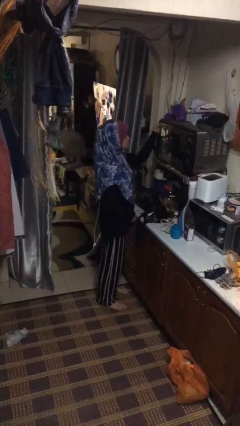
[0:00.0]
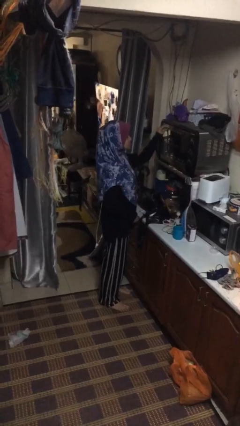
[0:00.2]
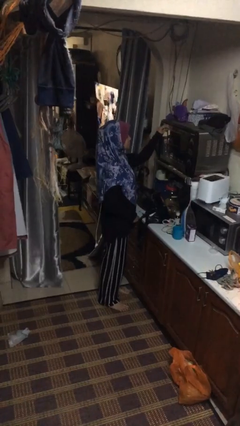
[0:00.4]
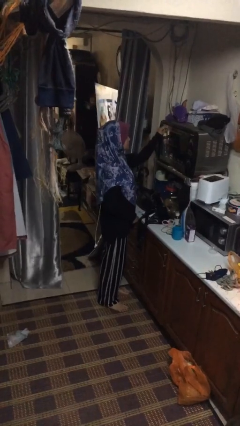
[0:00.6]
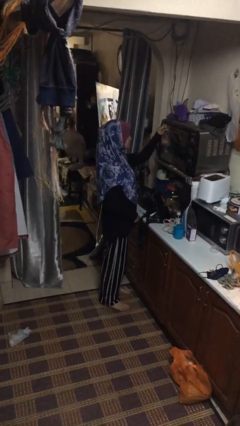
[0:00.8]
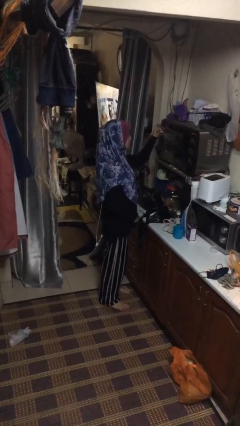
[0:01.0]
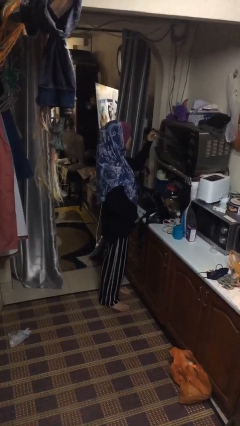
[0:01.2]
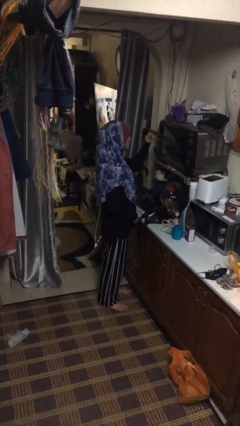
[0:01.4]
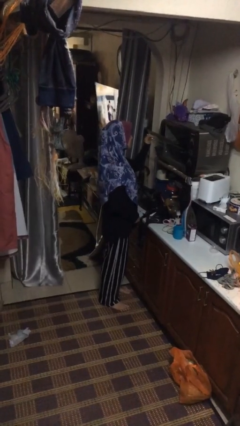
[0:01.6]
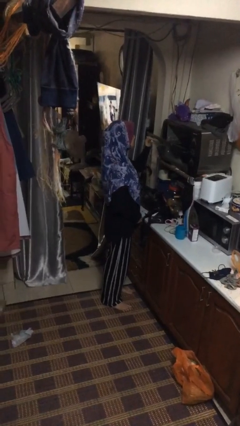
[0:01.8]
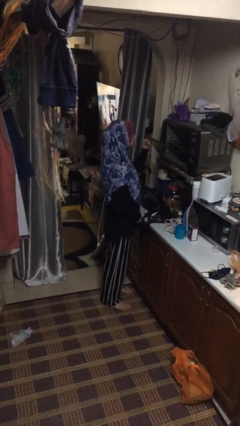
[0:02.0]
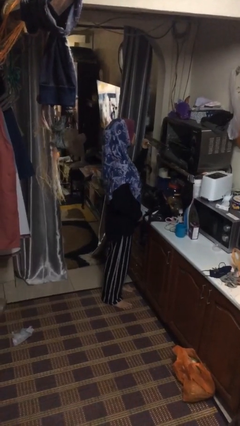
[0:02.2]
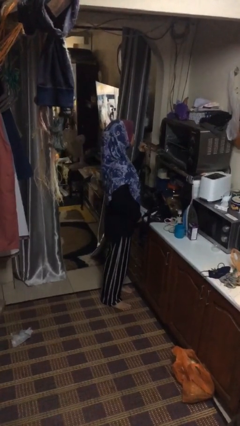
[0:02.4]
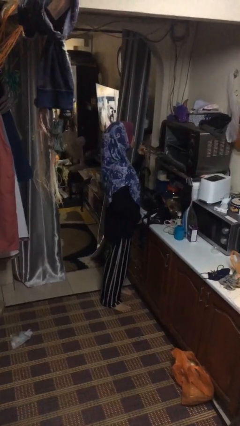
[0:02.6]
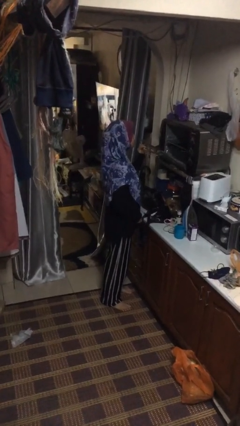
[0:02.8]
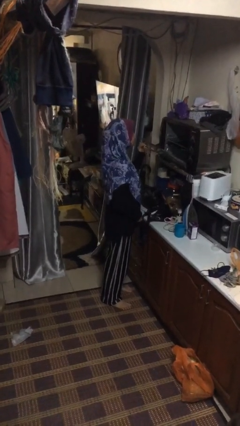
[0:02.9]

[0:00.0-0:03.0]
person opens oven door

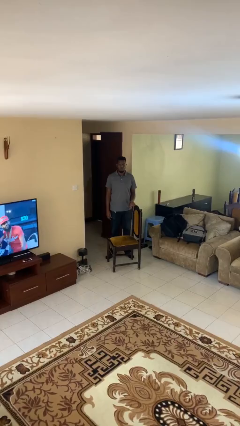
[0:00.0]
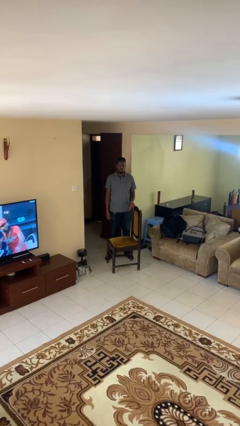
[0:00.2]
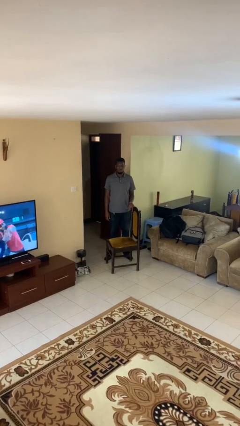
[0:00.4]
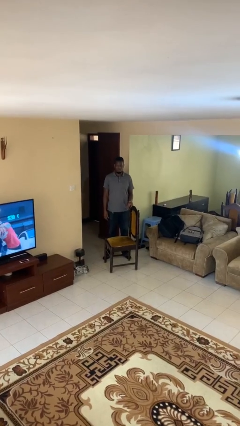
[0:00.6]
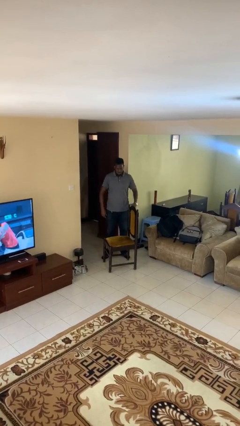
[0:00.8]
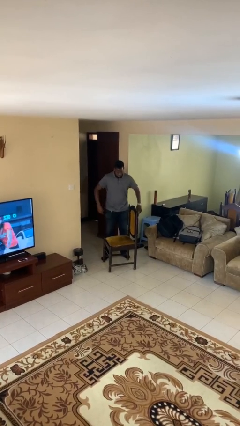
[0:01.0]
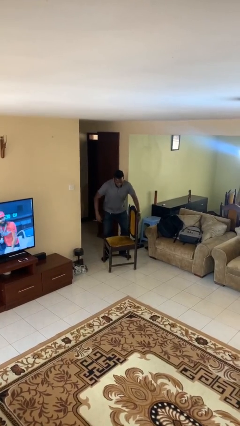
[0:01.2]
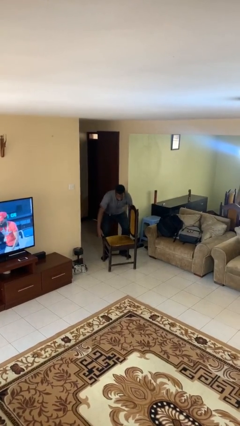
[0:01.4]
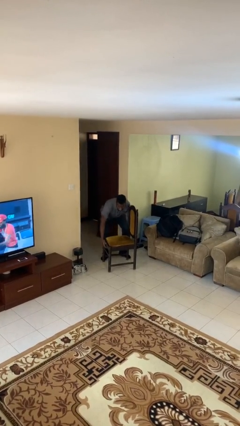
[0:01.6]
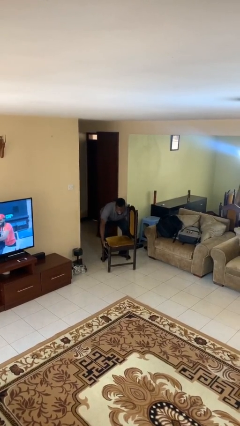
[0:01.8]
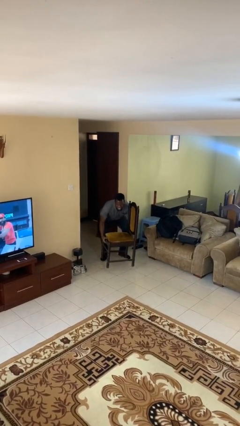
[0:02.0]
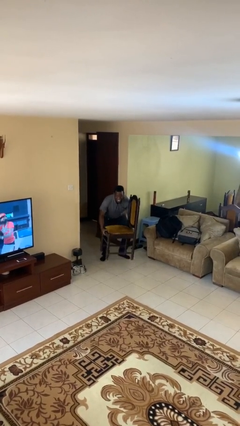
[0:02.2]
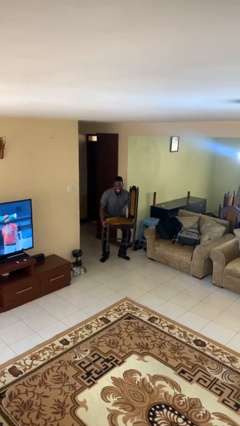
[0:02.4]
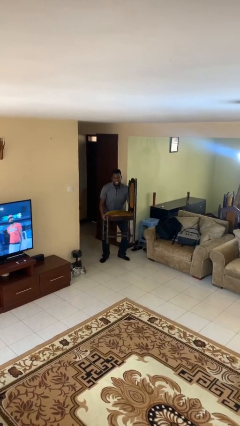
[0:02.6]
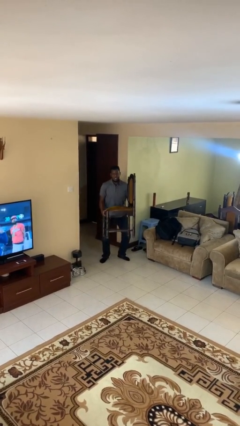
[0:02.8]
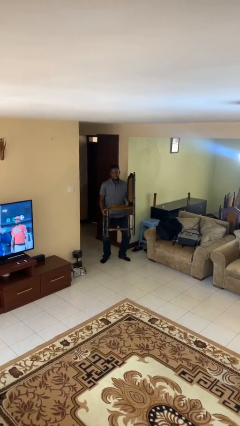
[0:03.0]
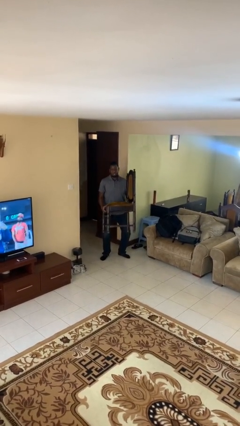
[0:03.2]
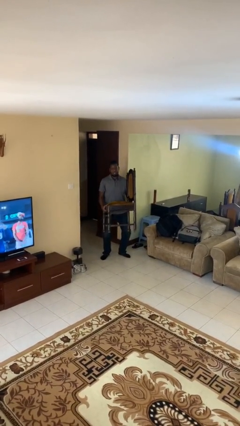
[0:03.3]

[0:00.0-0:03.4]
person picks up object from floor

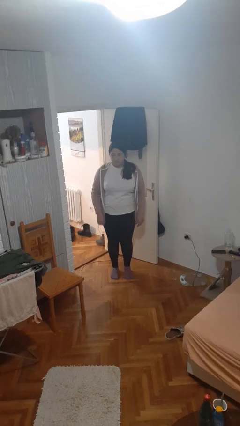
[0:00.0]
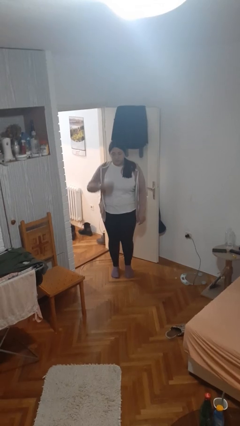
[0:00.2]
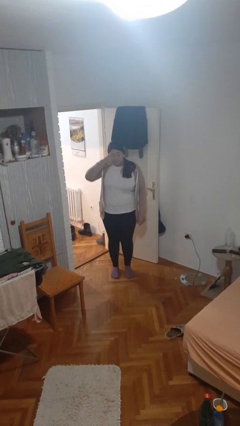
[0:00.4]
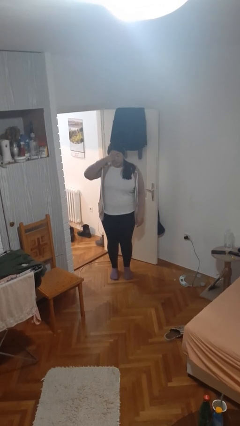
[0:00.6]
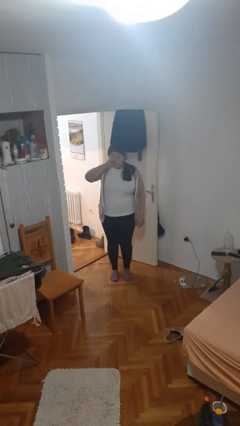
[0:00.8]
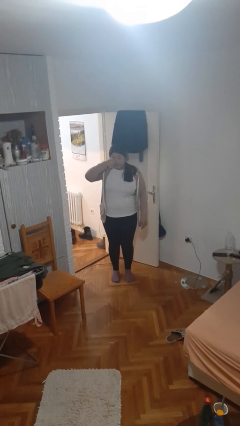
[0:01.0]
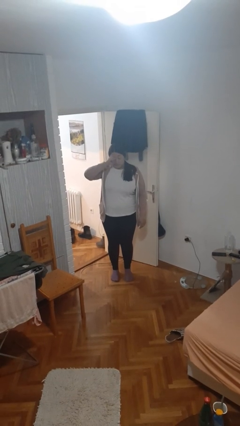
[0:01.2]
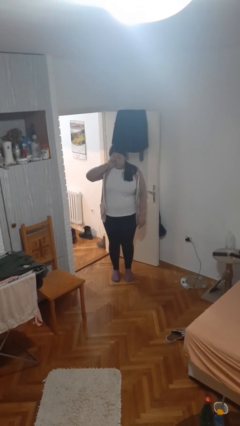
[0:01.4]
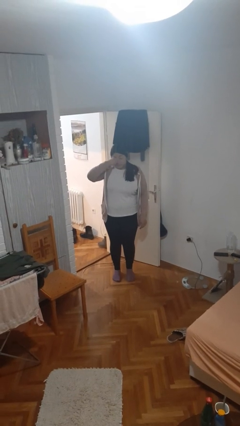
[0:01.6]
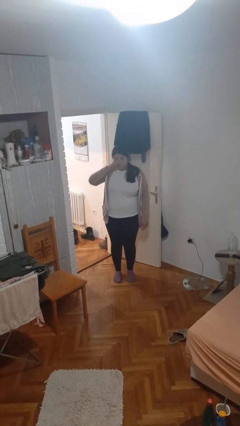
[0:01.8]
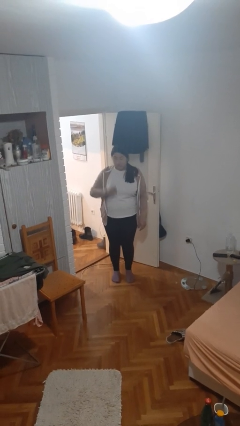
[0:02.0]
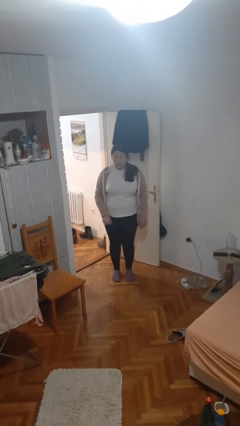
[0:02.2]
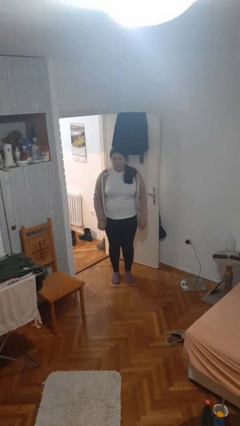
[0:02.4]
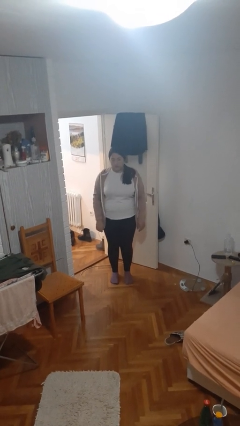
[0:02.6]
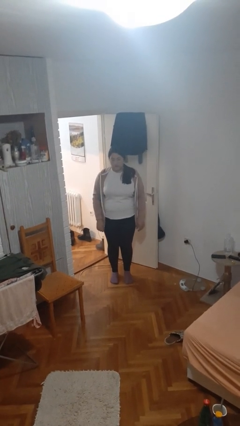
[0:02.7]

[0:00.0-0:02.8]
person rubs eyes

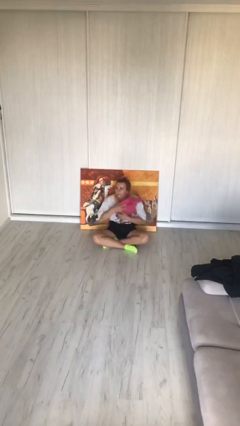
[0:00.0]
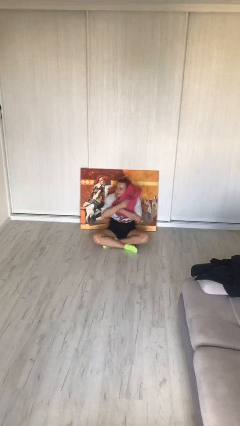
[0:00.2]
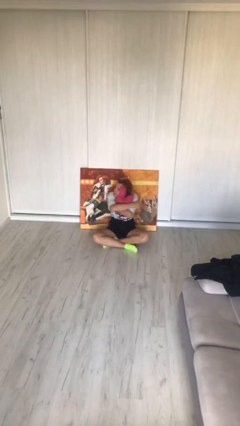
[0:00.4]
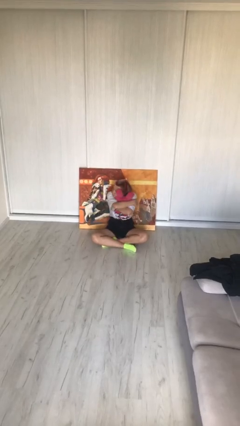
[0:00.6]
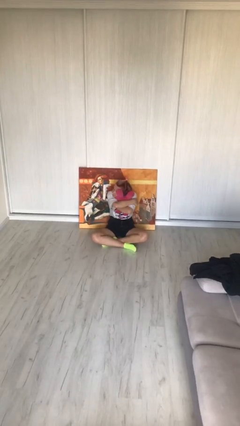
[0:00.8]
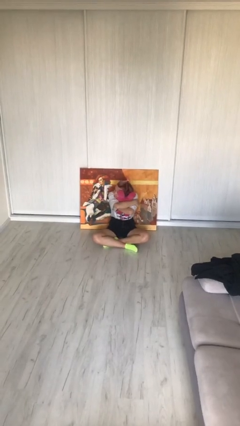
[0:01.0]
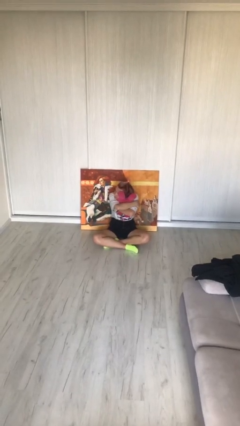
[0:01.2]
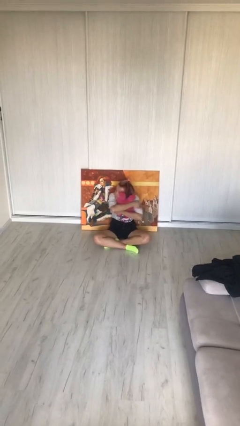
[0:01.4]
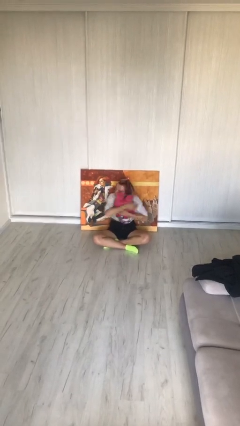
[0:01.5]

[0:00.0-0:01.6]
person hugs stuffed animal

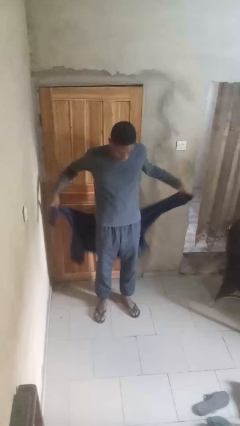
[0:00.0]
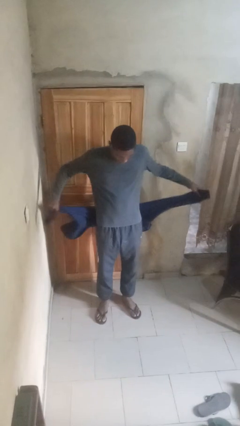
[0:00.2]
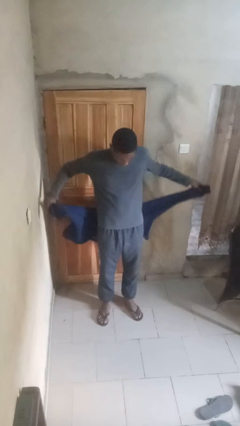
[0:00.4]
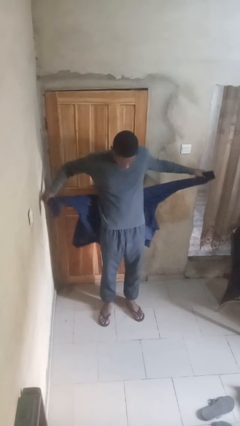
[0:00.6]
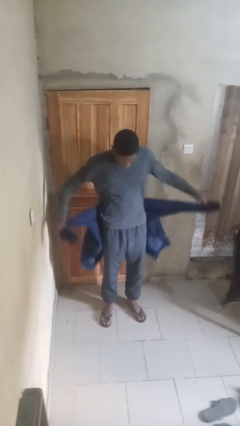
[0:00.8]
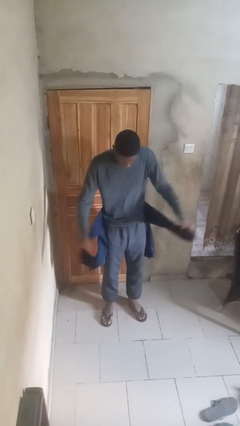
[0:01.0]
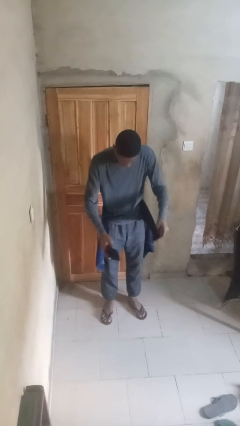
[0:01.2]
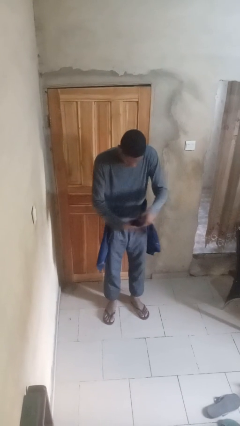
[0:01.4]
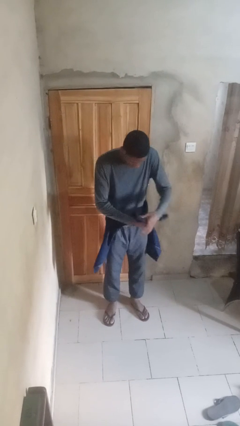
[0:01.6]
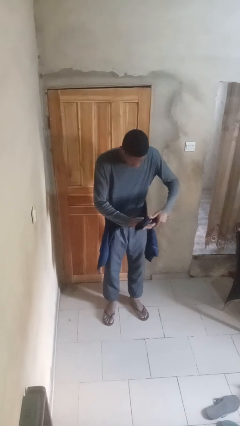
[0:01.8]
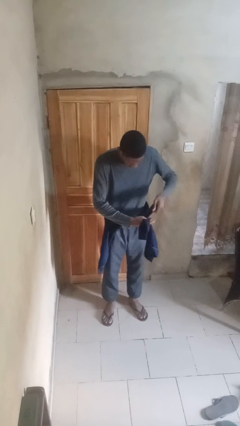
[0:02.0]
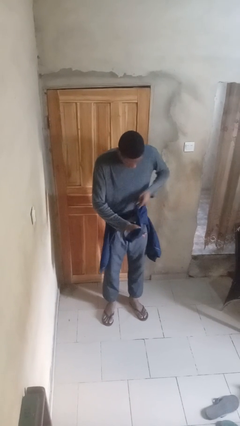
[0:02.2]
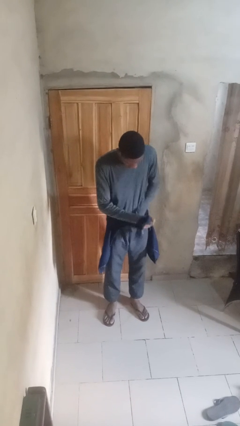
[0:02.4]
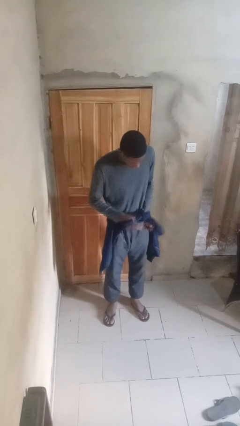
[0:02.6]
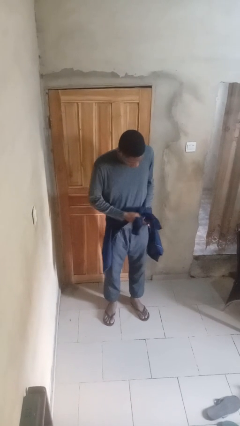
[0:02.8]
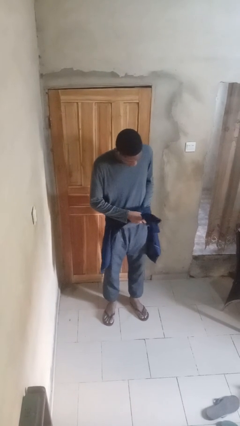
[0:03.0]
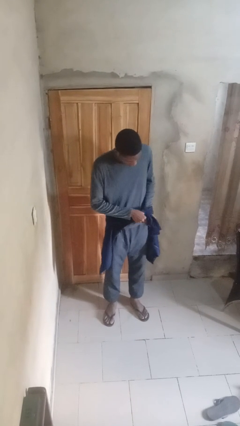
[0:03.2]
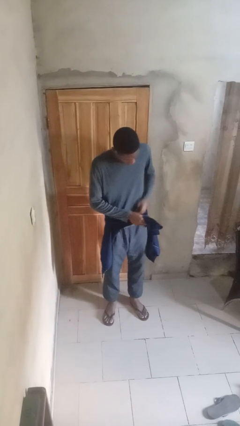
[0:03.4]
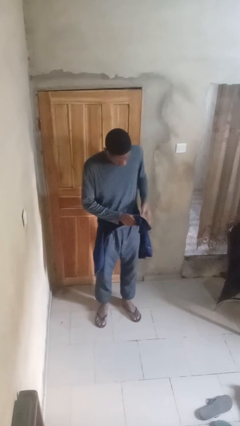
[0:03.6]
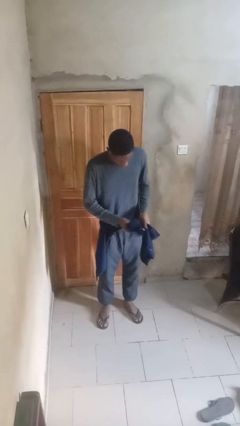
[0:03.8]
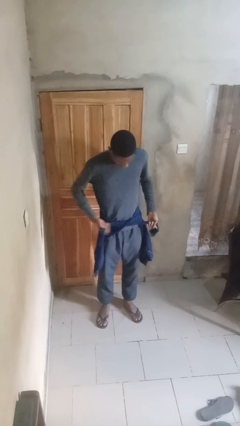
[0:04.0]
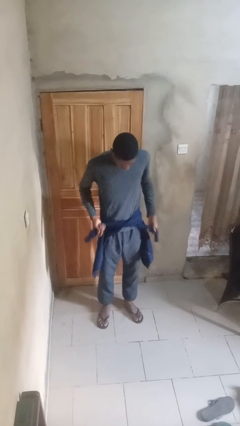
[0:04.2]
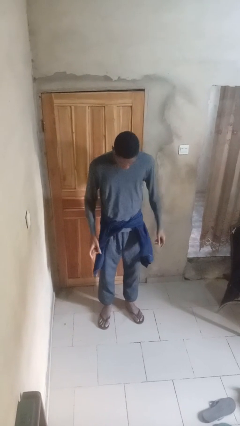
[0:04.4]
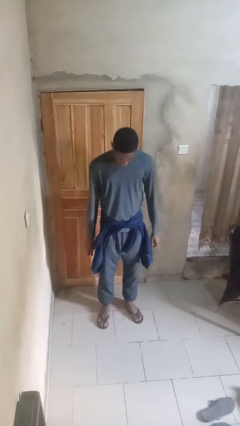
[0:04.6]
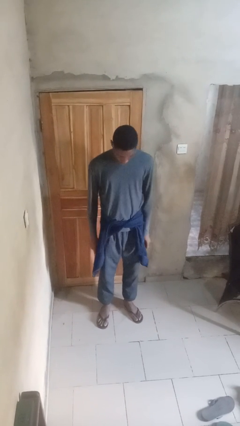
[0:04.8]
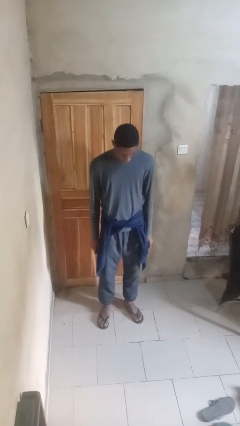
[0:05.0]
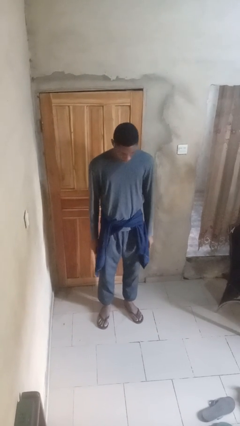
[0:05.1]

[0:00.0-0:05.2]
person ties jacket around waist

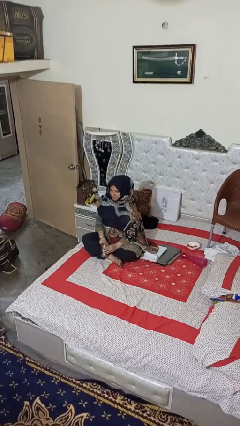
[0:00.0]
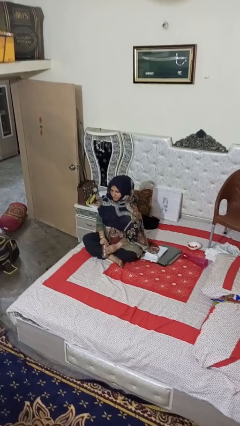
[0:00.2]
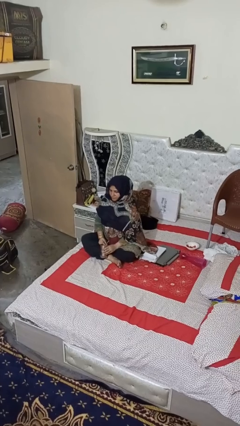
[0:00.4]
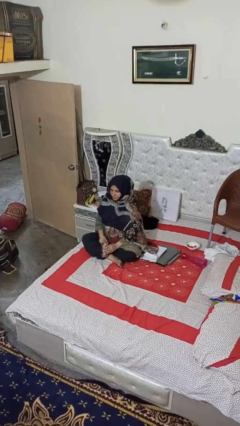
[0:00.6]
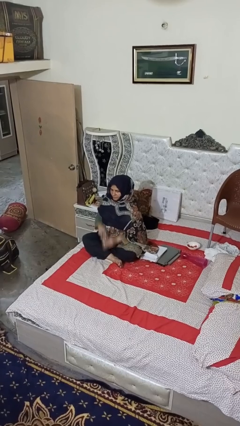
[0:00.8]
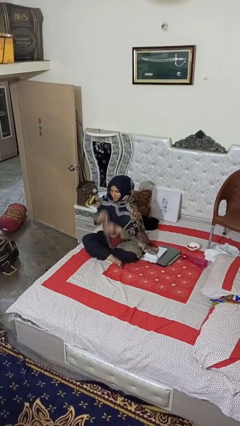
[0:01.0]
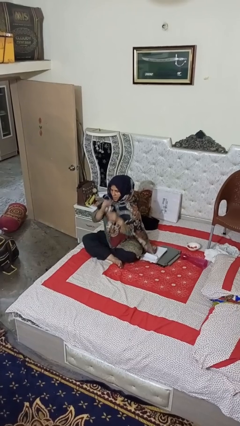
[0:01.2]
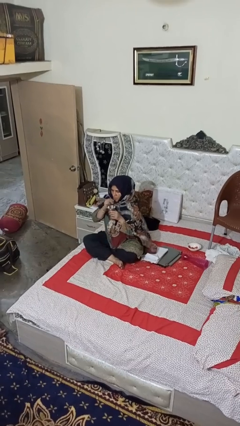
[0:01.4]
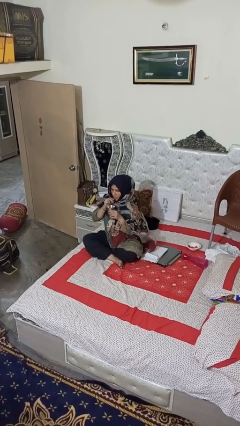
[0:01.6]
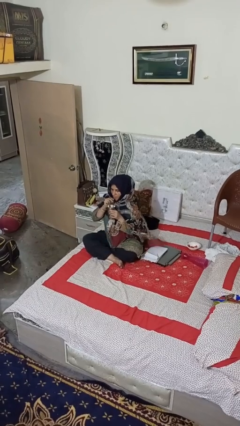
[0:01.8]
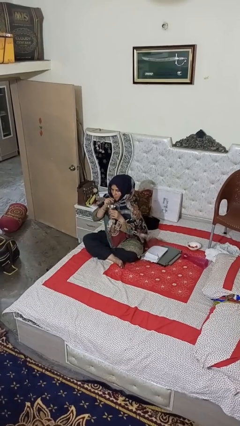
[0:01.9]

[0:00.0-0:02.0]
person drinks from straw
